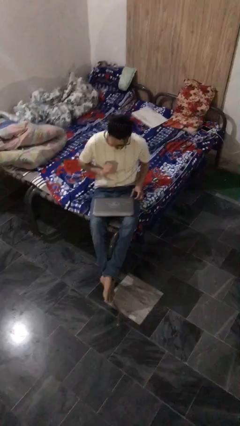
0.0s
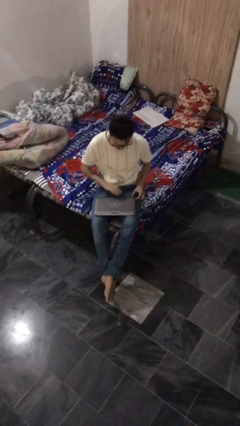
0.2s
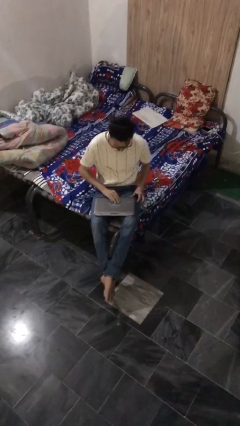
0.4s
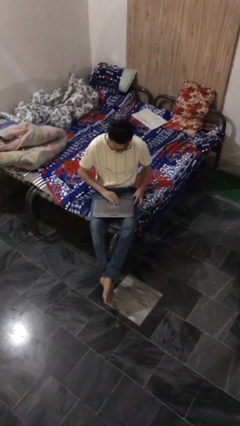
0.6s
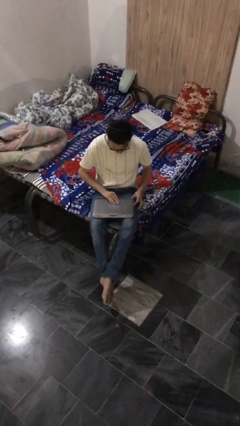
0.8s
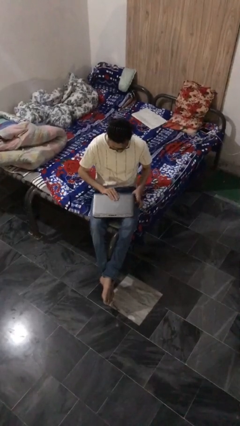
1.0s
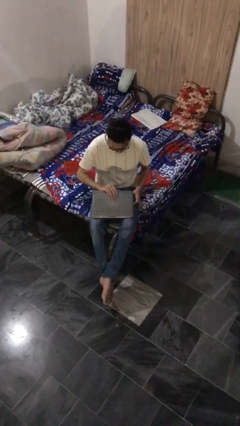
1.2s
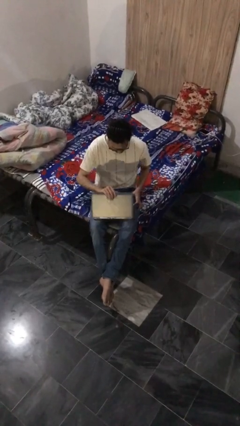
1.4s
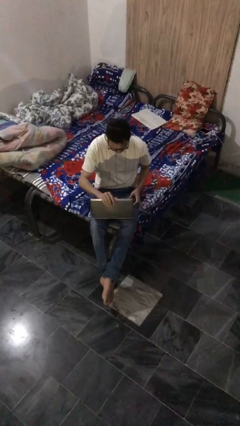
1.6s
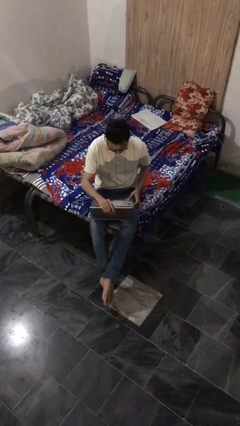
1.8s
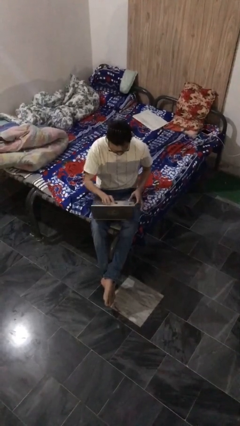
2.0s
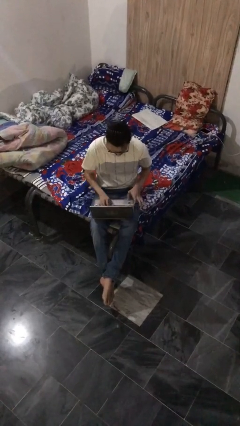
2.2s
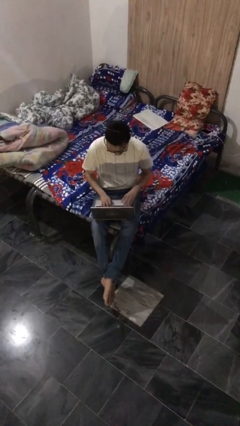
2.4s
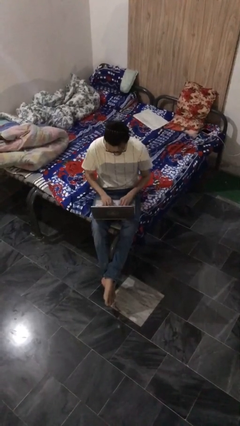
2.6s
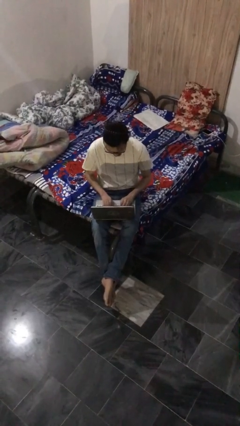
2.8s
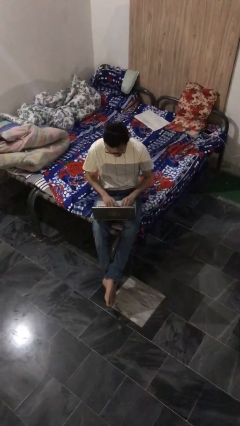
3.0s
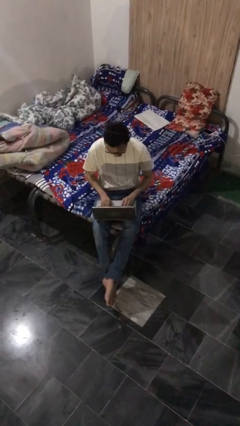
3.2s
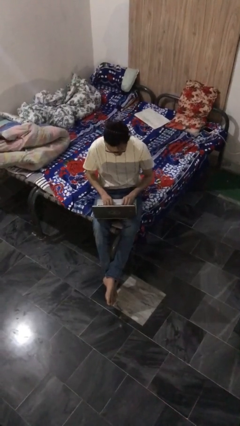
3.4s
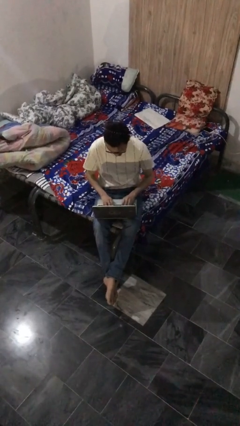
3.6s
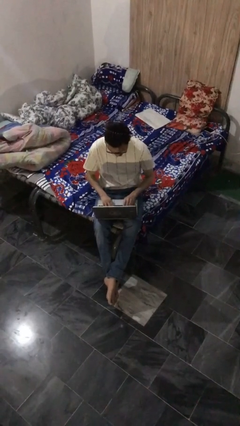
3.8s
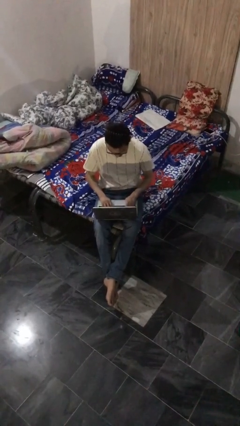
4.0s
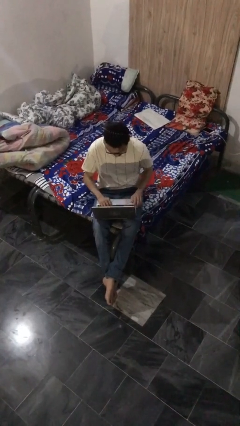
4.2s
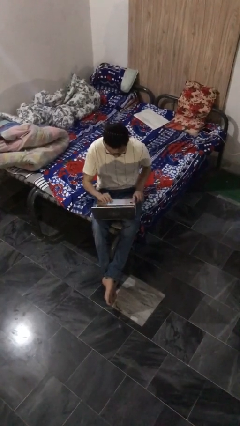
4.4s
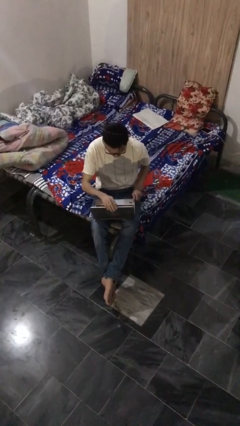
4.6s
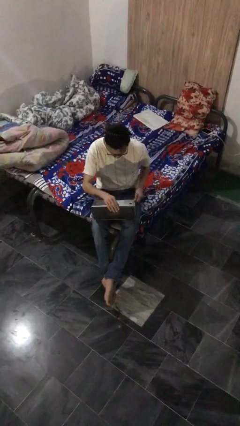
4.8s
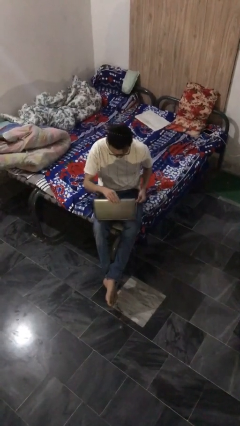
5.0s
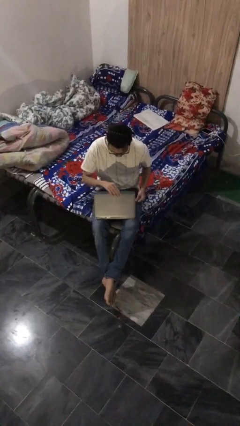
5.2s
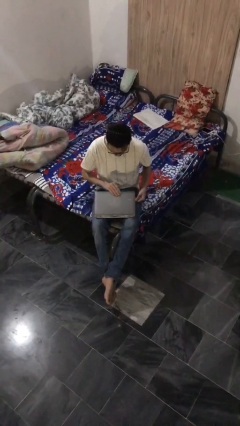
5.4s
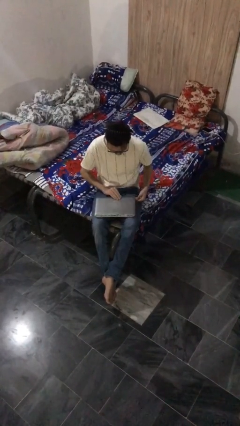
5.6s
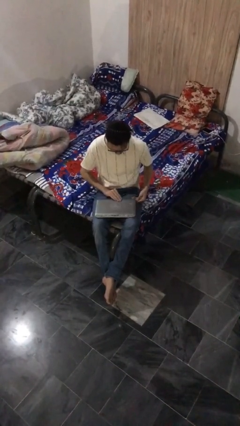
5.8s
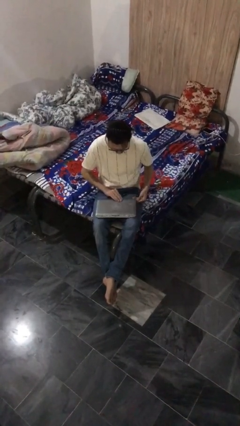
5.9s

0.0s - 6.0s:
person interacts with laptop

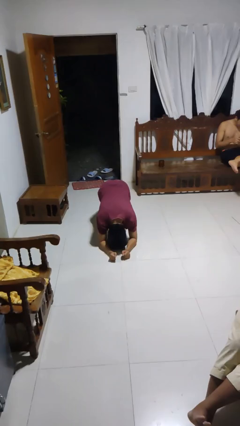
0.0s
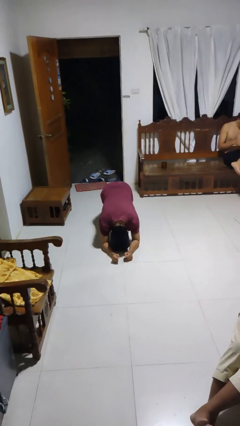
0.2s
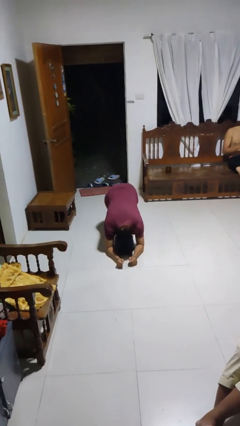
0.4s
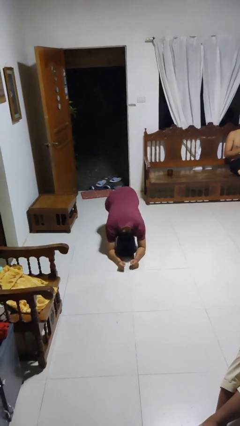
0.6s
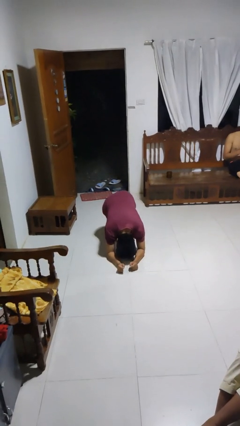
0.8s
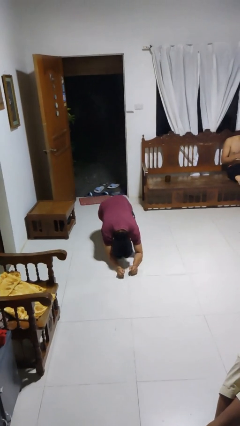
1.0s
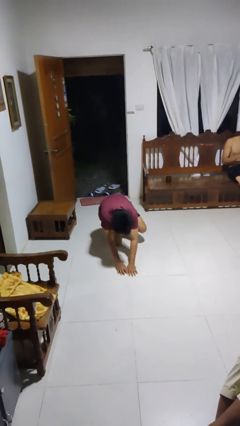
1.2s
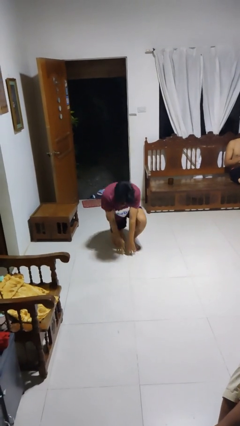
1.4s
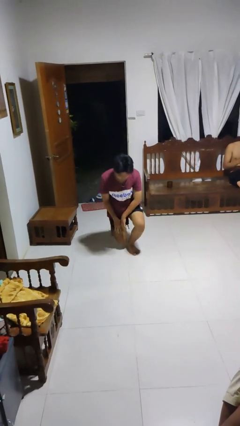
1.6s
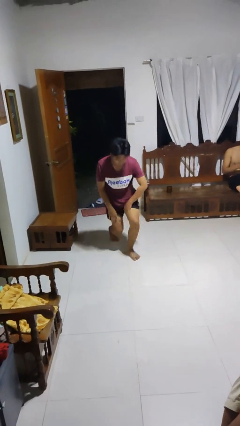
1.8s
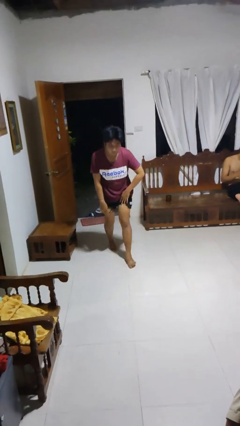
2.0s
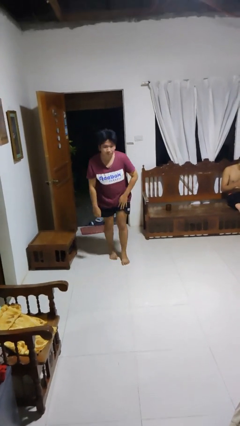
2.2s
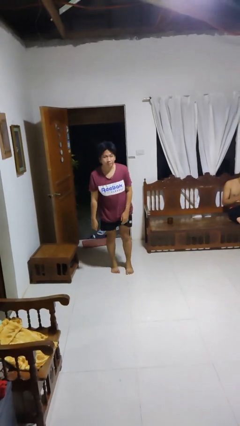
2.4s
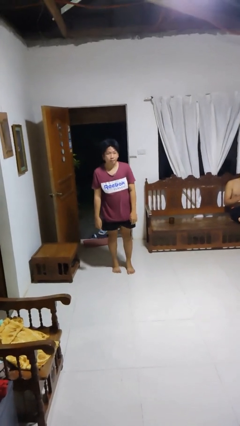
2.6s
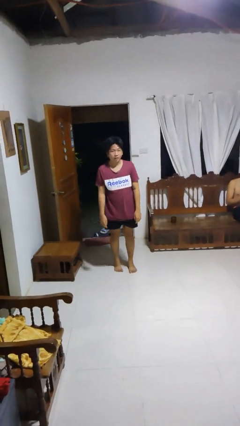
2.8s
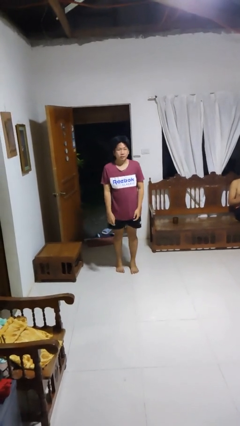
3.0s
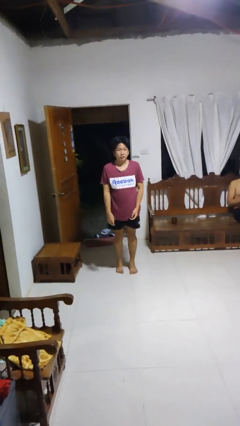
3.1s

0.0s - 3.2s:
person stands up from floor

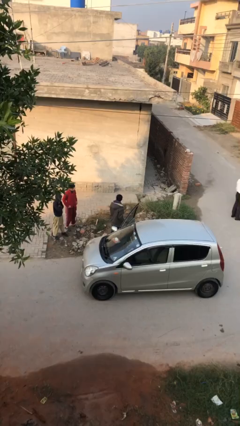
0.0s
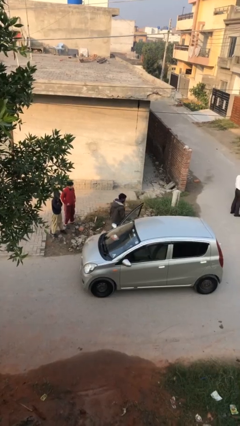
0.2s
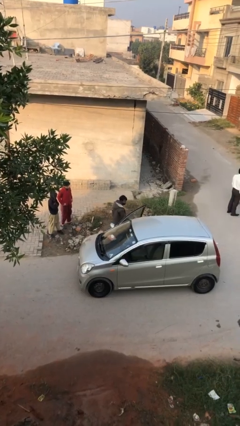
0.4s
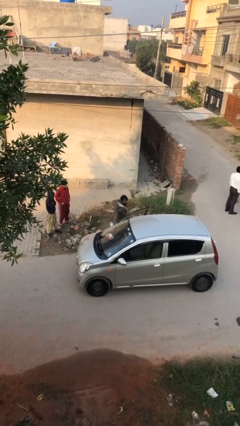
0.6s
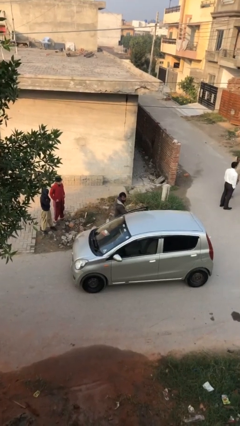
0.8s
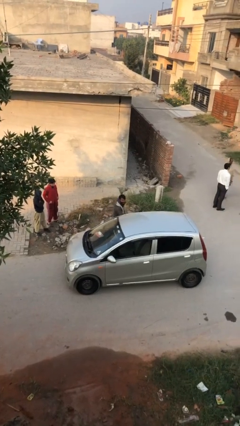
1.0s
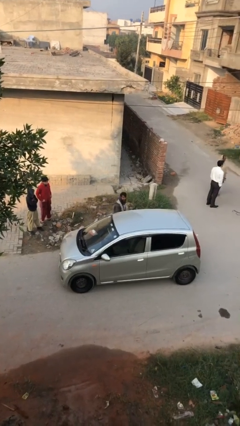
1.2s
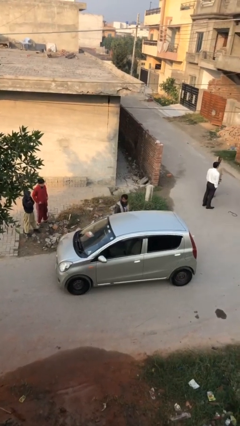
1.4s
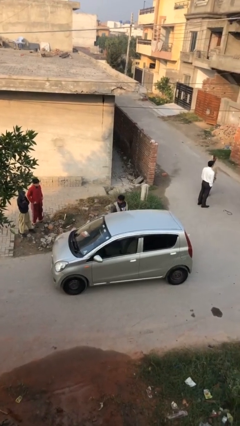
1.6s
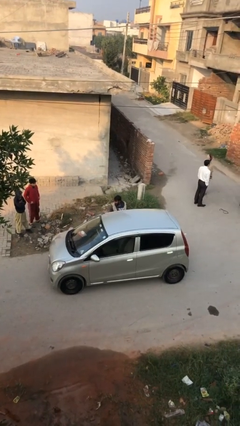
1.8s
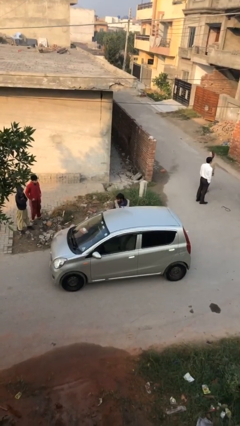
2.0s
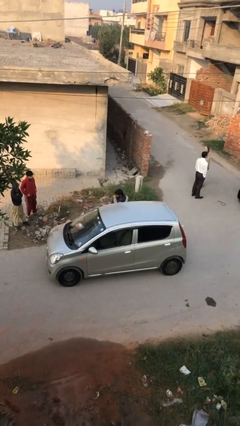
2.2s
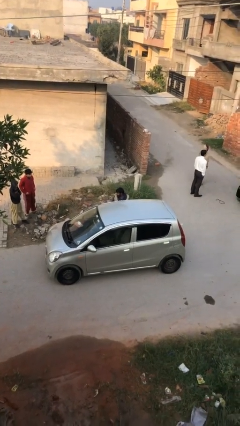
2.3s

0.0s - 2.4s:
person closes car door

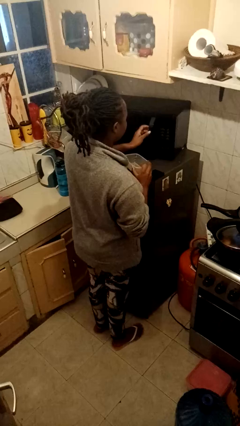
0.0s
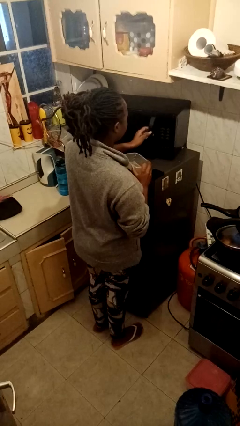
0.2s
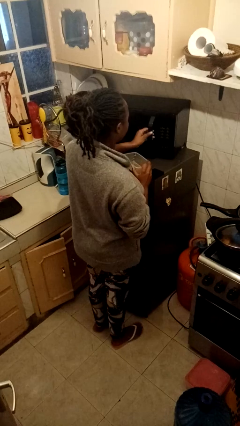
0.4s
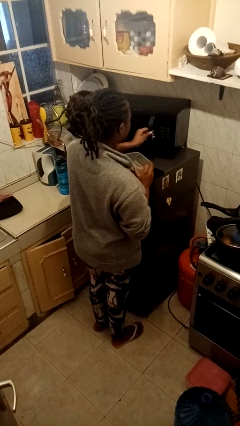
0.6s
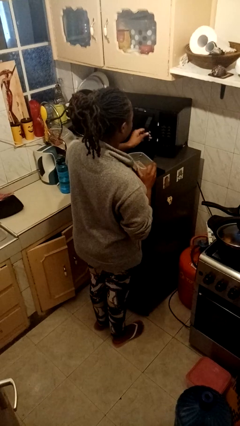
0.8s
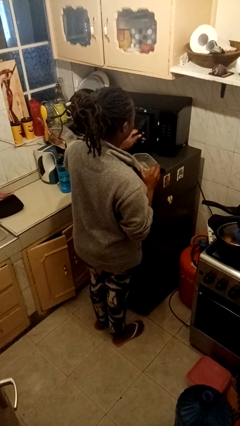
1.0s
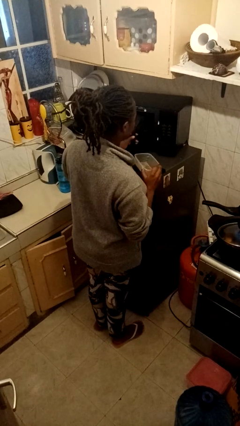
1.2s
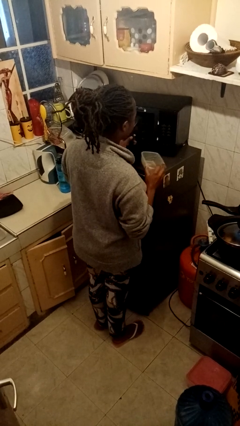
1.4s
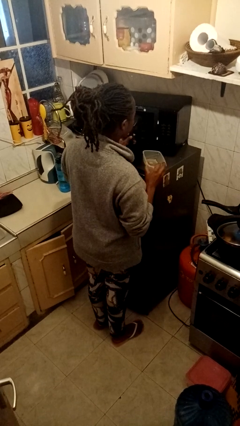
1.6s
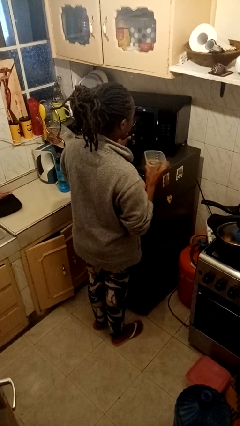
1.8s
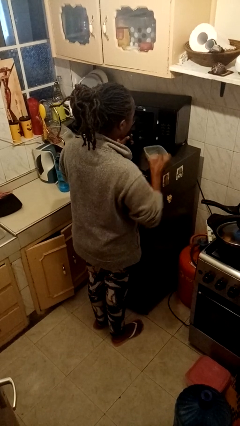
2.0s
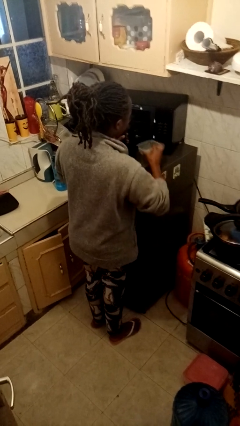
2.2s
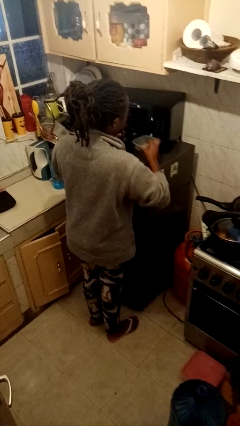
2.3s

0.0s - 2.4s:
person opens microwave

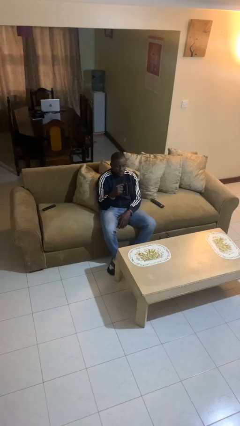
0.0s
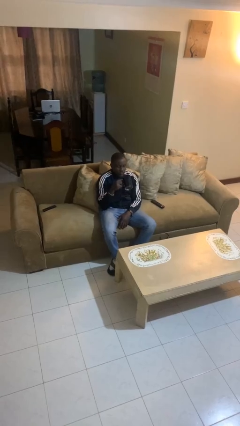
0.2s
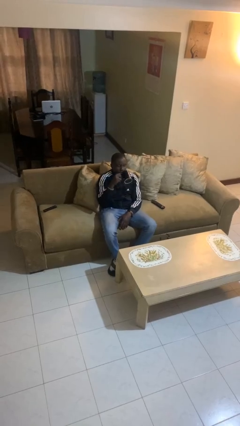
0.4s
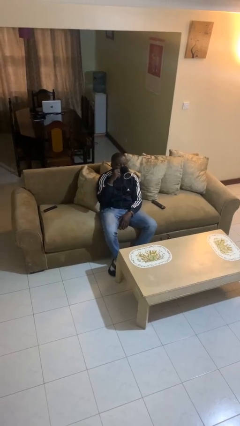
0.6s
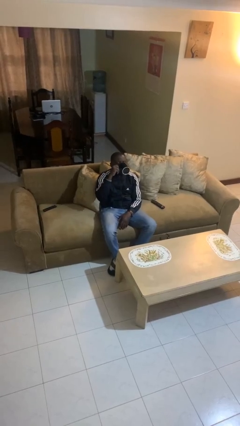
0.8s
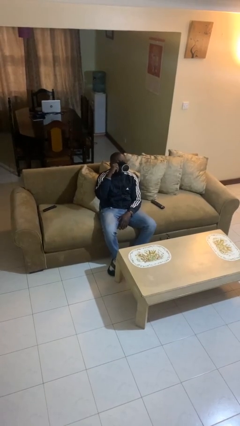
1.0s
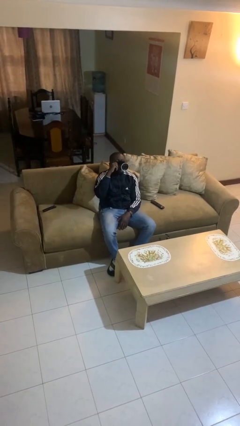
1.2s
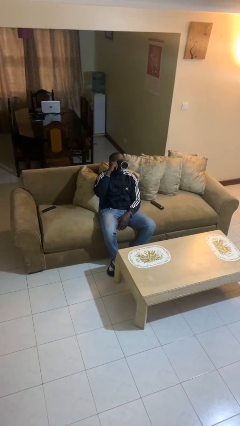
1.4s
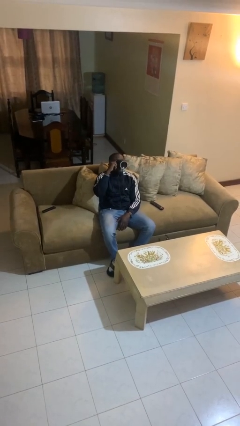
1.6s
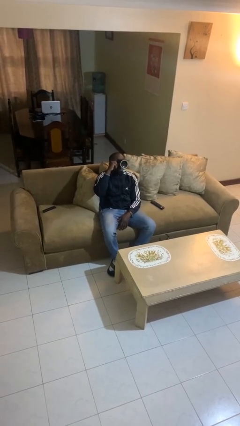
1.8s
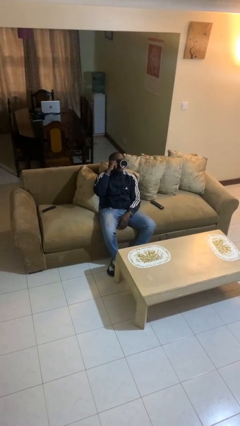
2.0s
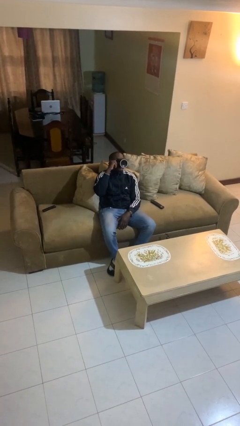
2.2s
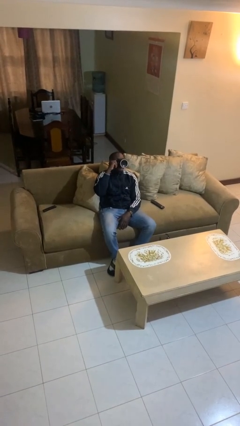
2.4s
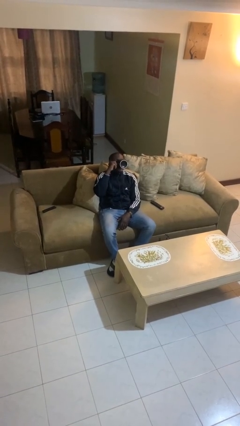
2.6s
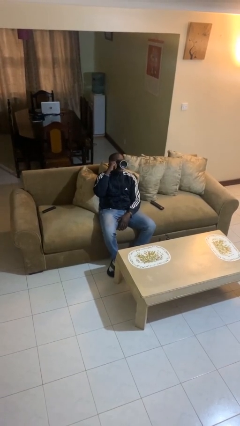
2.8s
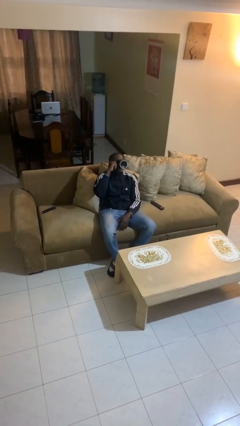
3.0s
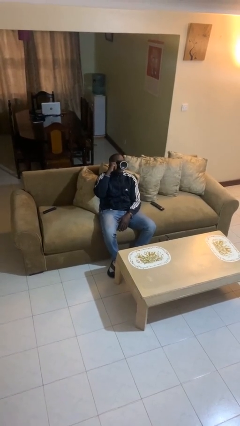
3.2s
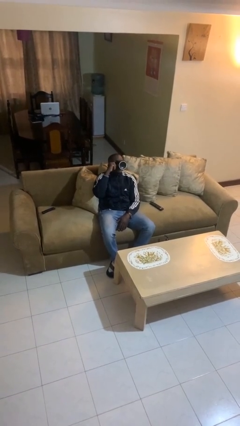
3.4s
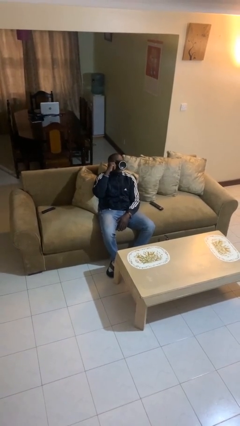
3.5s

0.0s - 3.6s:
person drinks from mug

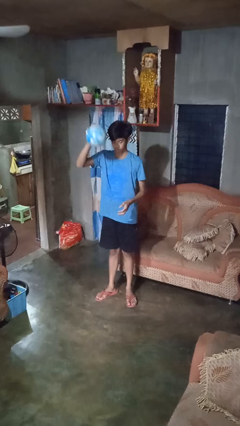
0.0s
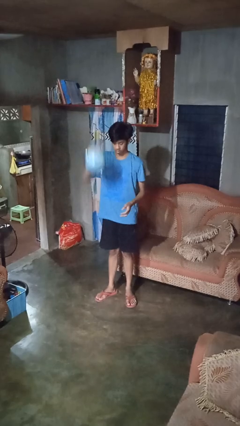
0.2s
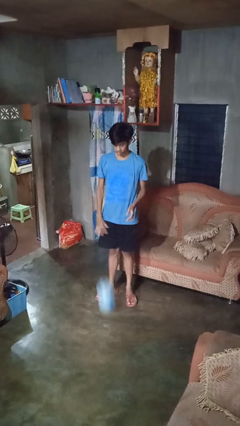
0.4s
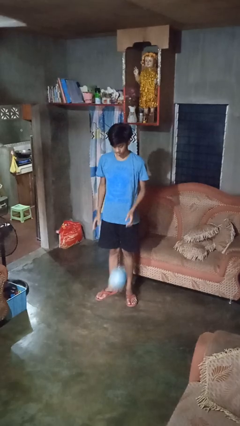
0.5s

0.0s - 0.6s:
person bounces ball on floor
